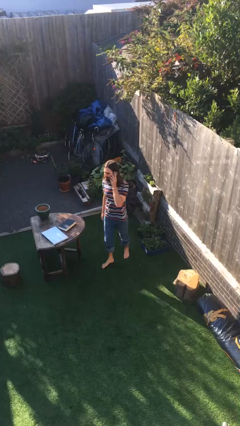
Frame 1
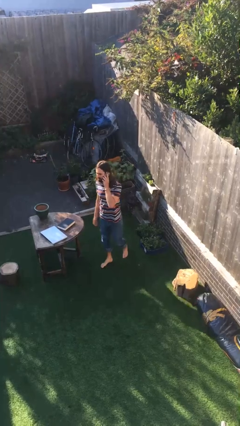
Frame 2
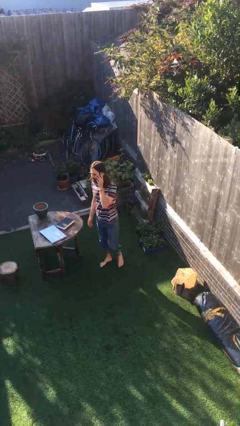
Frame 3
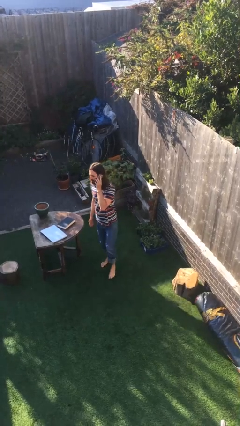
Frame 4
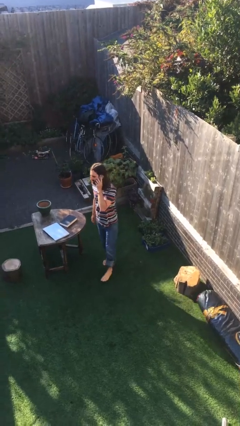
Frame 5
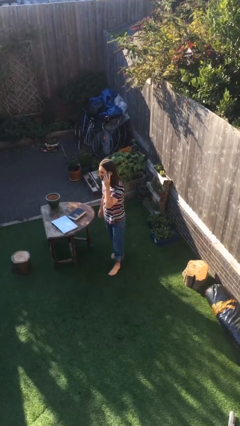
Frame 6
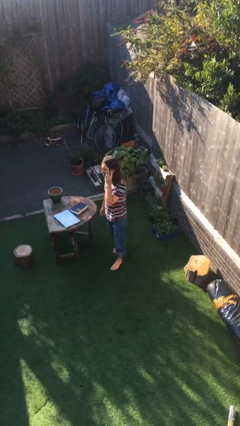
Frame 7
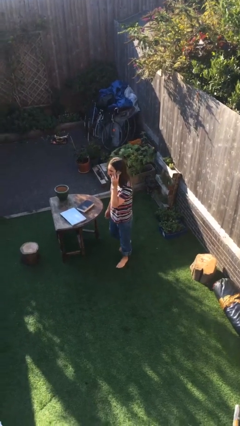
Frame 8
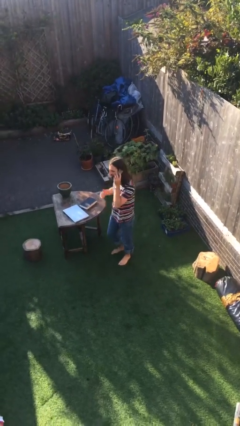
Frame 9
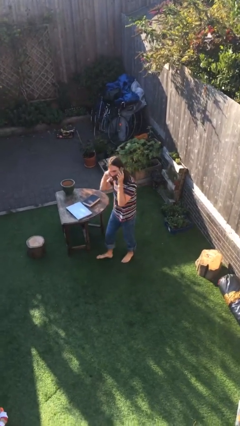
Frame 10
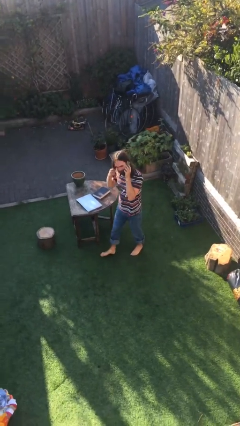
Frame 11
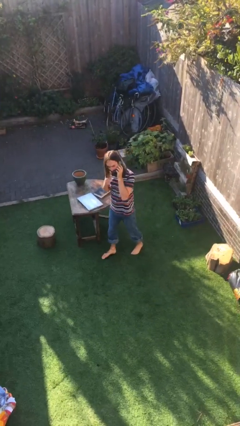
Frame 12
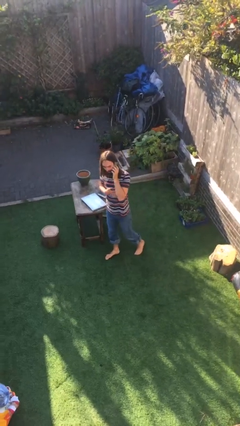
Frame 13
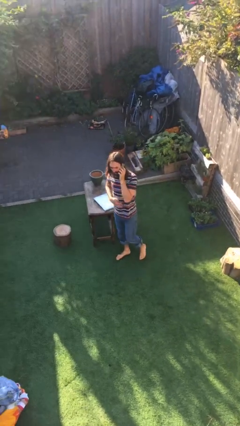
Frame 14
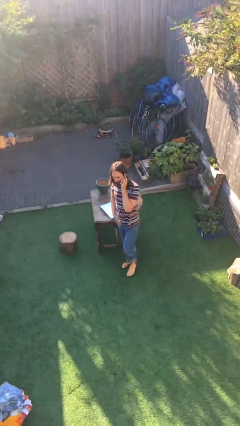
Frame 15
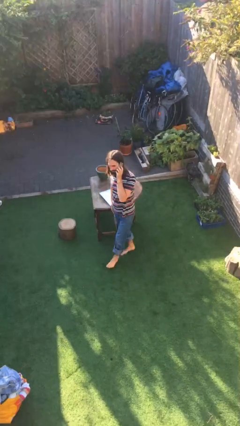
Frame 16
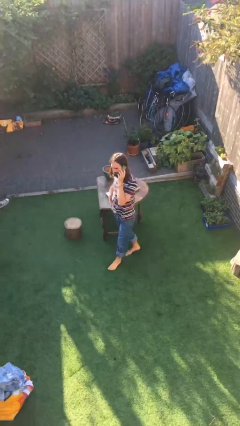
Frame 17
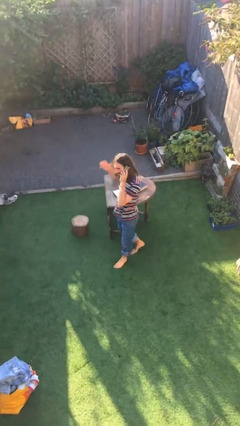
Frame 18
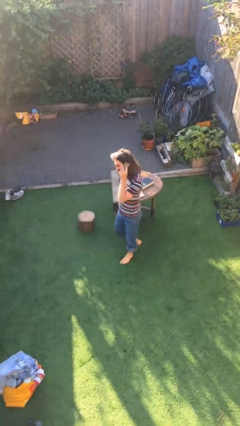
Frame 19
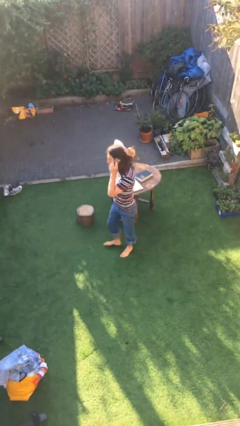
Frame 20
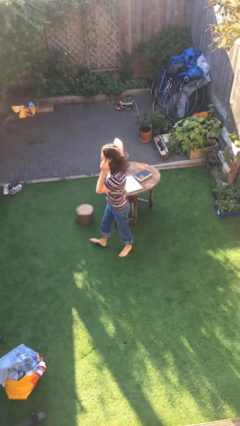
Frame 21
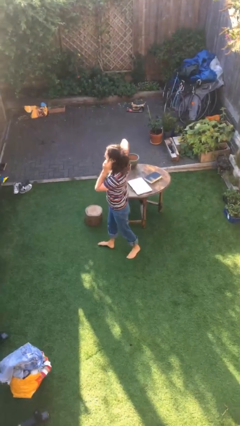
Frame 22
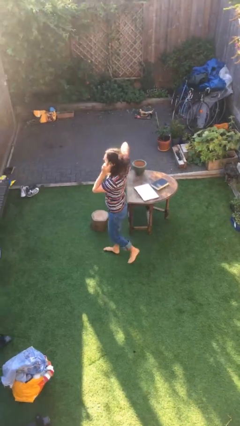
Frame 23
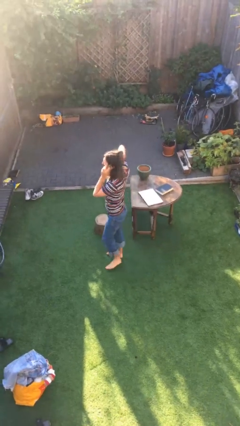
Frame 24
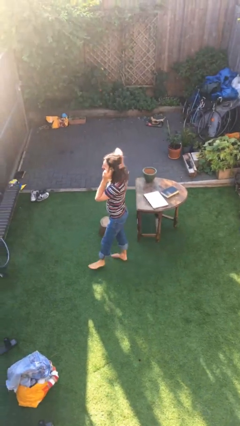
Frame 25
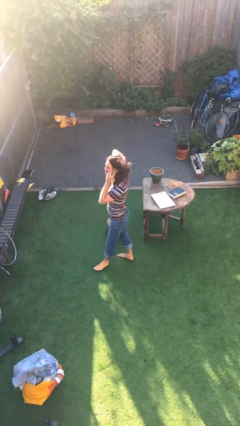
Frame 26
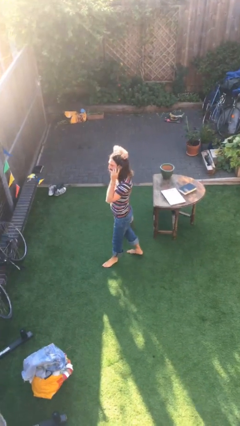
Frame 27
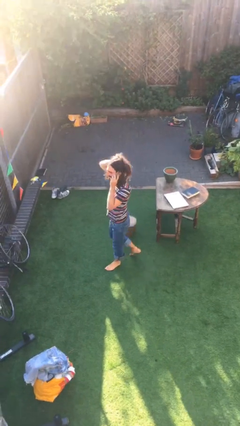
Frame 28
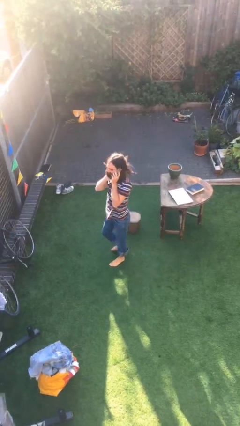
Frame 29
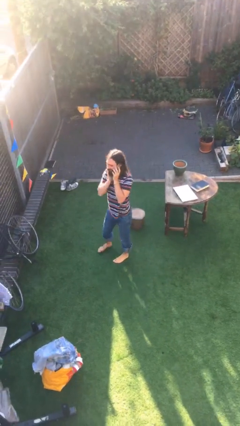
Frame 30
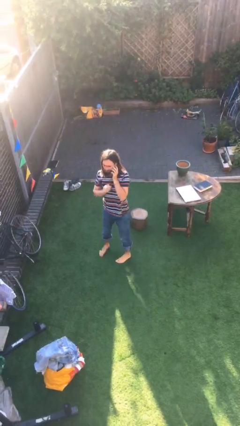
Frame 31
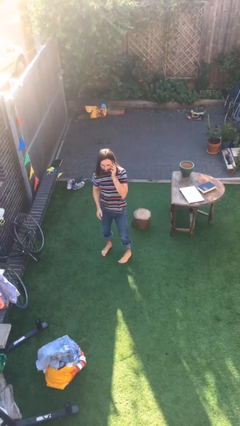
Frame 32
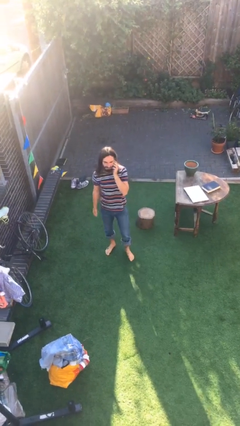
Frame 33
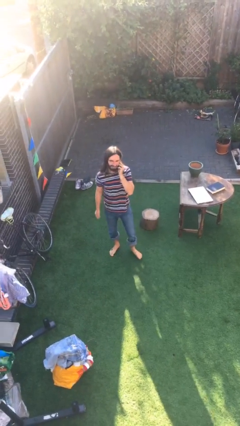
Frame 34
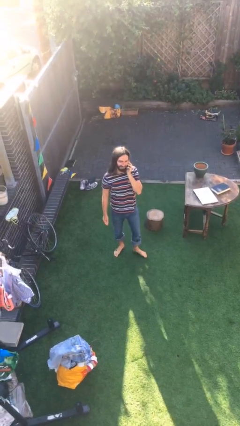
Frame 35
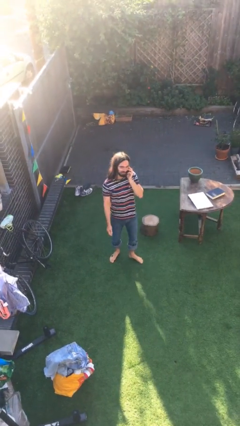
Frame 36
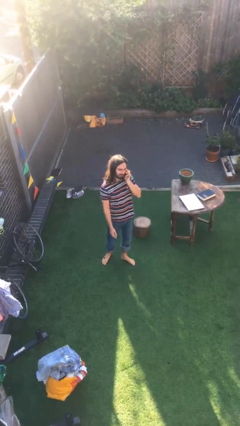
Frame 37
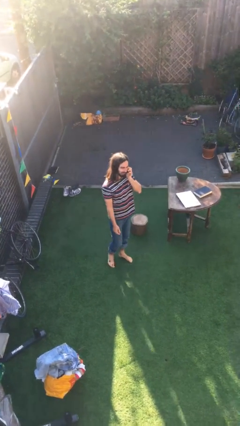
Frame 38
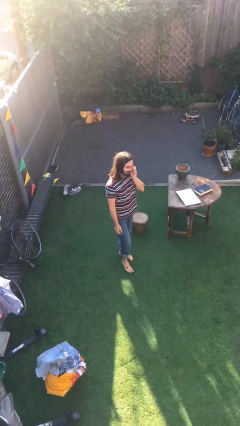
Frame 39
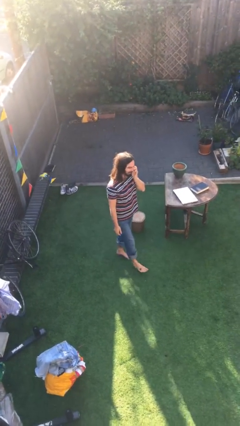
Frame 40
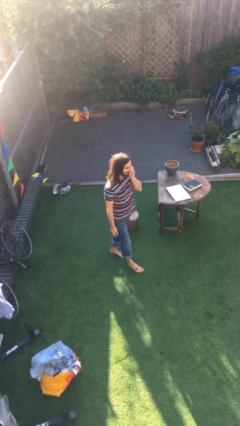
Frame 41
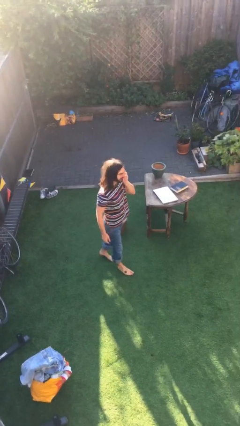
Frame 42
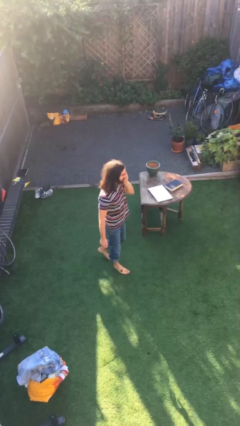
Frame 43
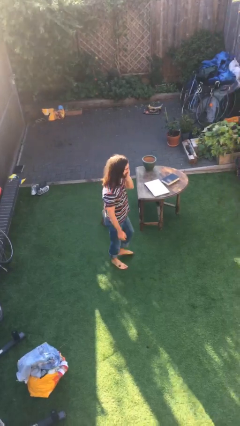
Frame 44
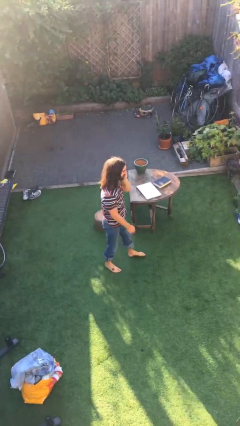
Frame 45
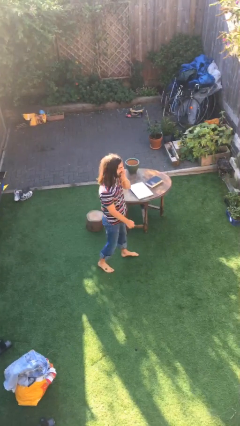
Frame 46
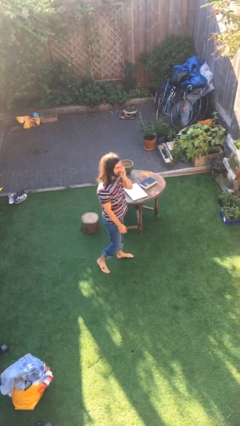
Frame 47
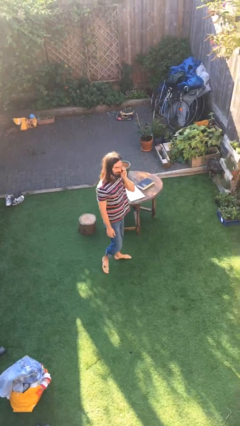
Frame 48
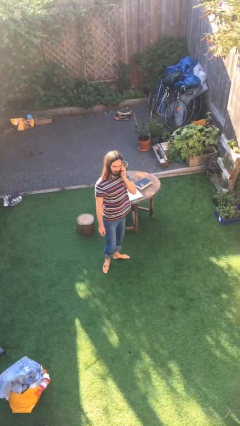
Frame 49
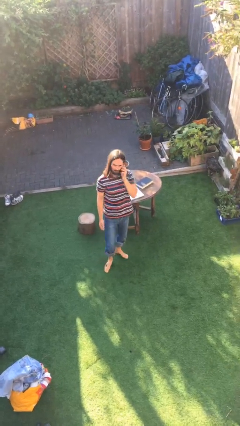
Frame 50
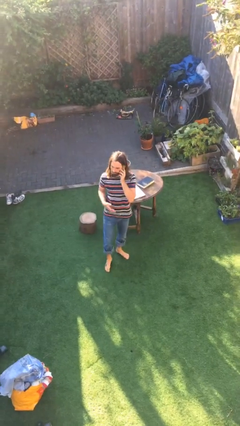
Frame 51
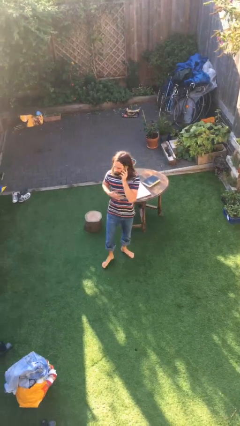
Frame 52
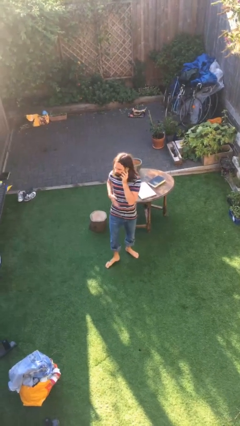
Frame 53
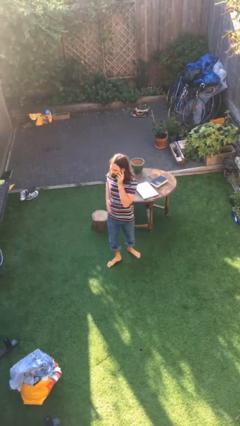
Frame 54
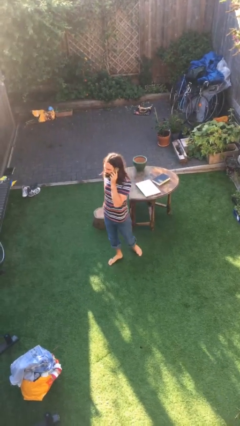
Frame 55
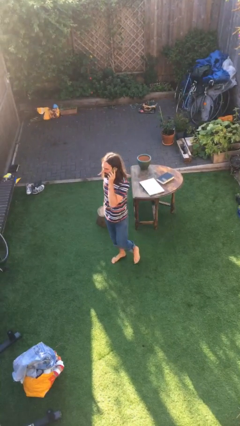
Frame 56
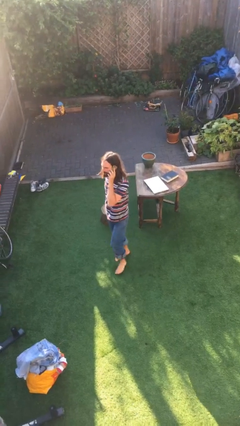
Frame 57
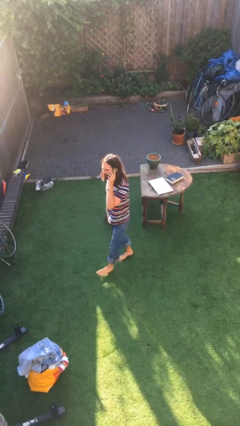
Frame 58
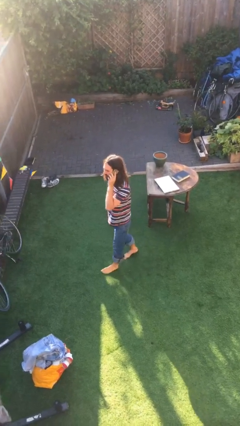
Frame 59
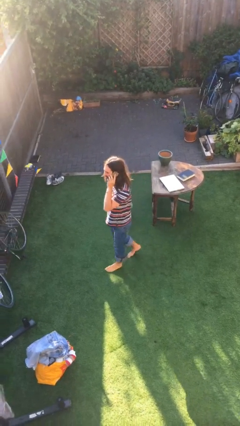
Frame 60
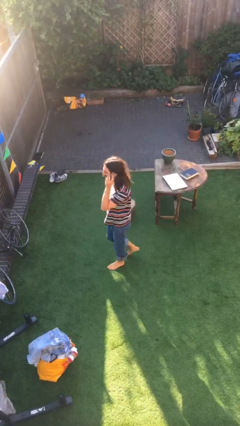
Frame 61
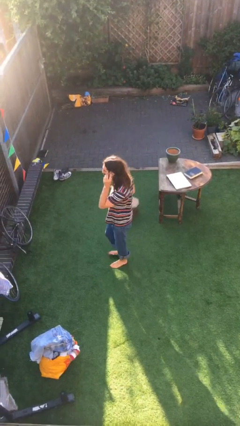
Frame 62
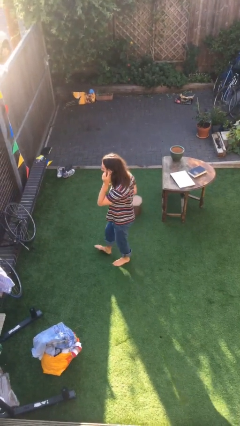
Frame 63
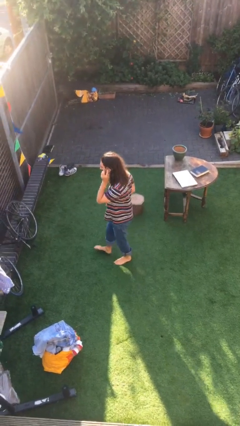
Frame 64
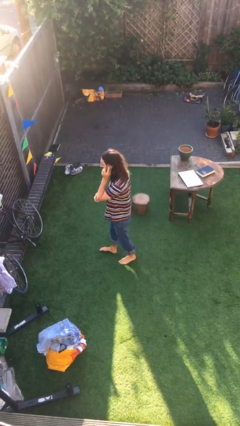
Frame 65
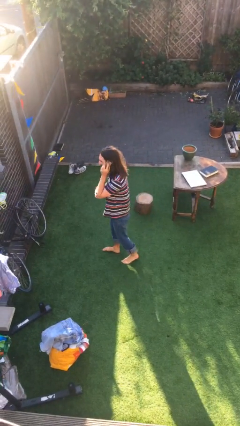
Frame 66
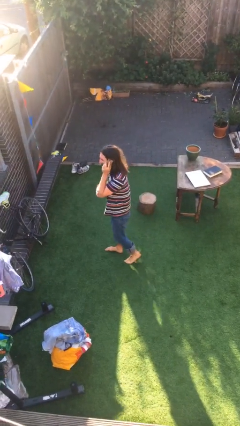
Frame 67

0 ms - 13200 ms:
person talks on phone

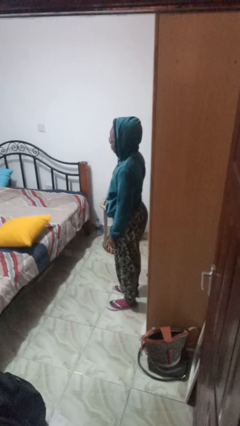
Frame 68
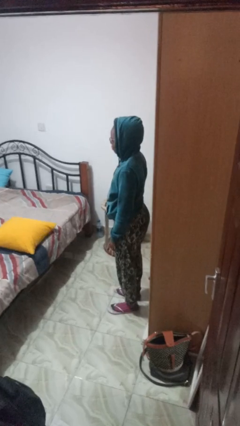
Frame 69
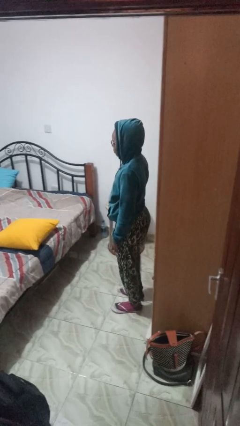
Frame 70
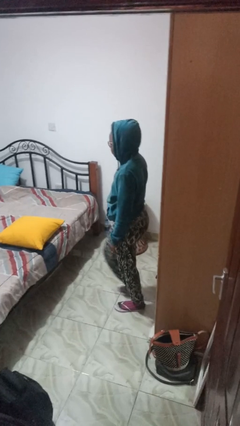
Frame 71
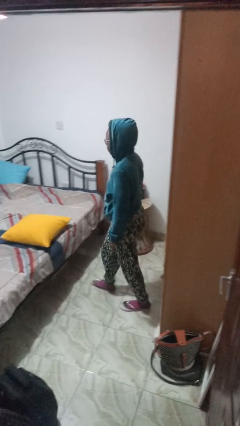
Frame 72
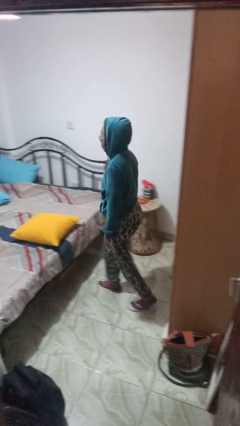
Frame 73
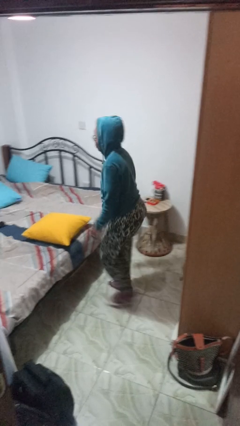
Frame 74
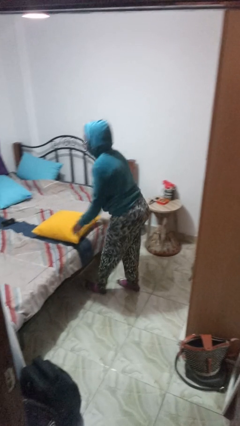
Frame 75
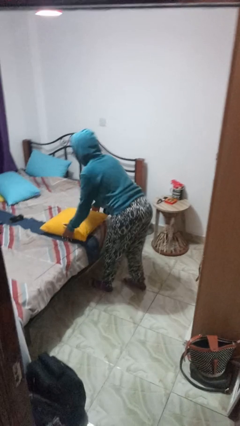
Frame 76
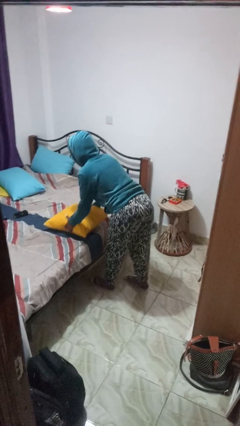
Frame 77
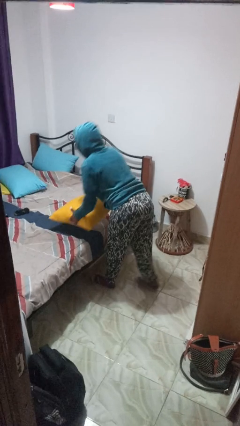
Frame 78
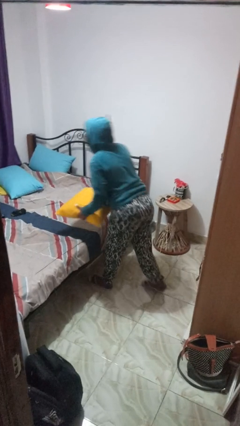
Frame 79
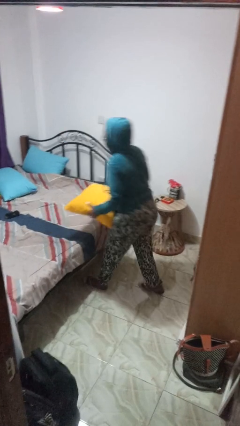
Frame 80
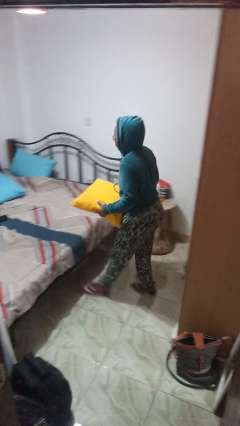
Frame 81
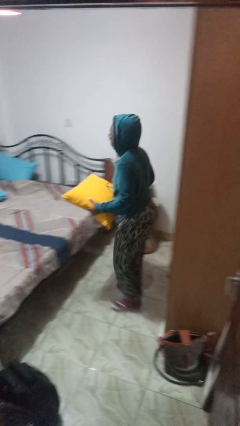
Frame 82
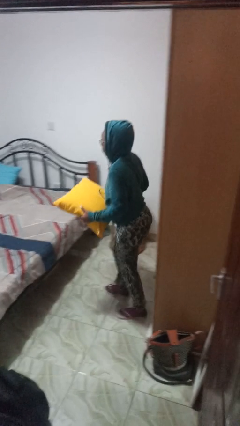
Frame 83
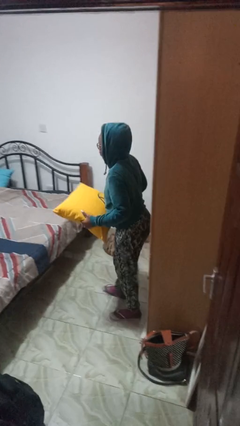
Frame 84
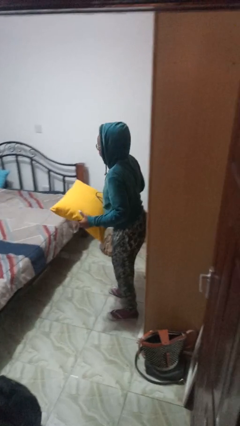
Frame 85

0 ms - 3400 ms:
person picks up object from bed

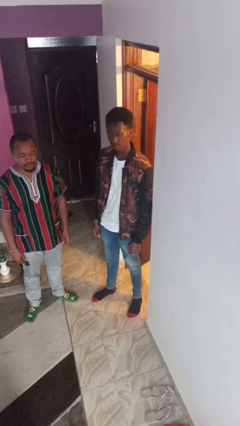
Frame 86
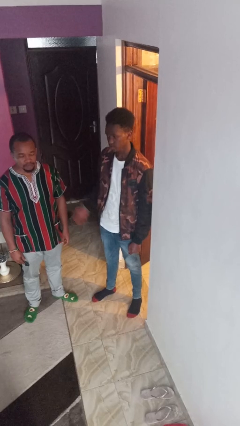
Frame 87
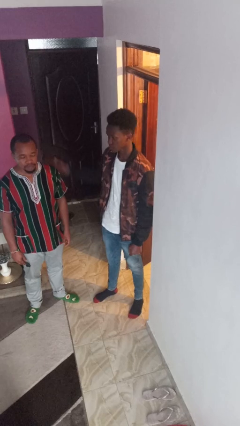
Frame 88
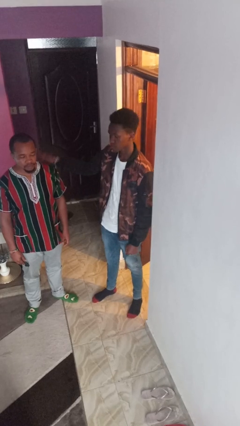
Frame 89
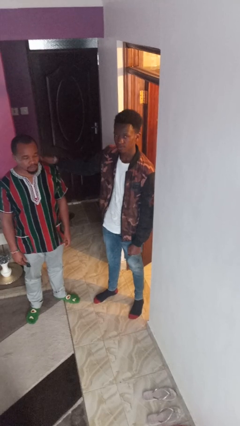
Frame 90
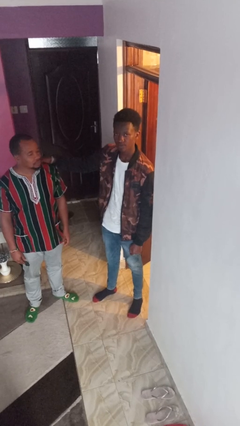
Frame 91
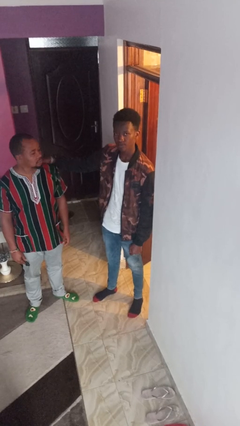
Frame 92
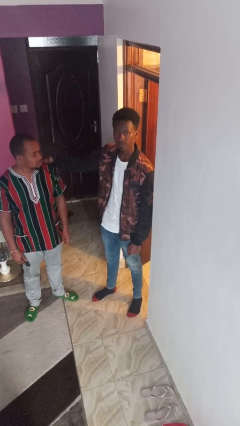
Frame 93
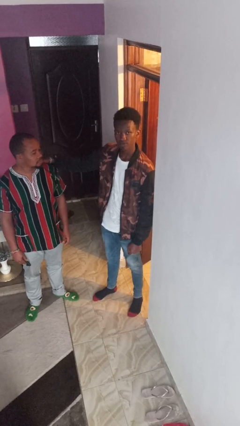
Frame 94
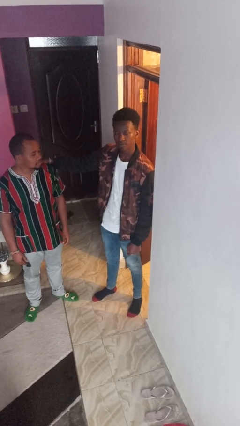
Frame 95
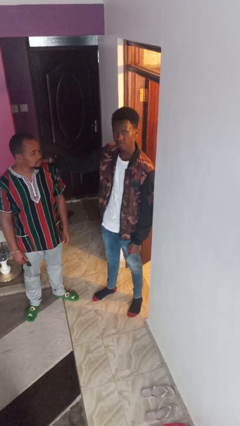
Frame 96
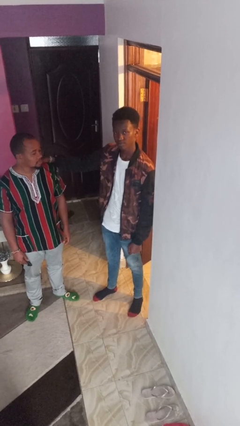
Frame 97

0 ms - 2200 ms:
person pounds shoulders of person
